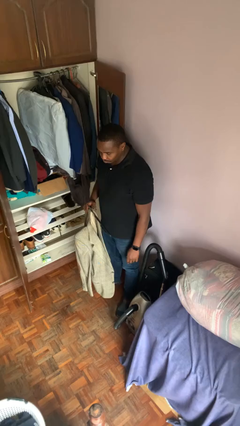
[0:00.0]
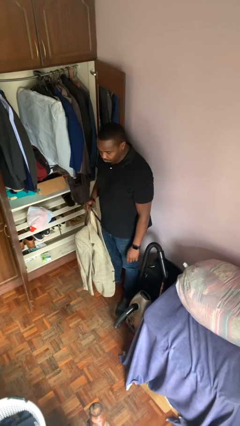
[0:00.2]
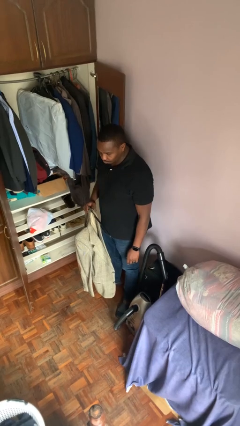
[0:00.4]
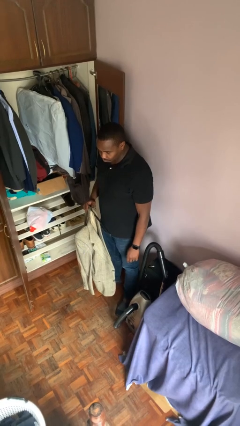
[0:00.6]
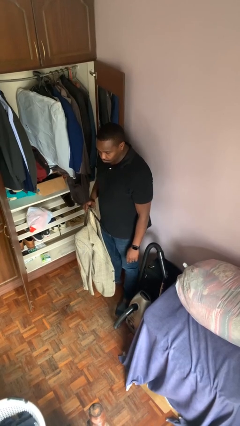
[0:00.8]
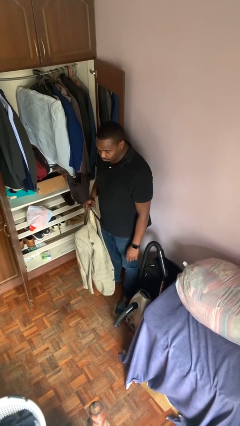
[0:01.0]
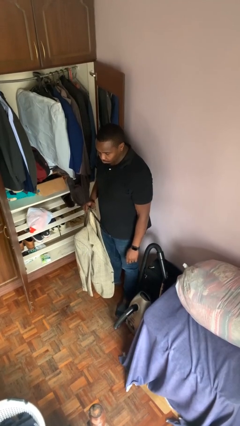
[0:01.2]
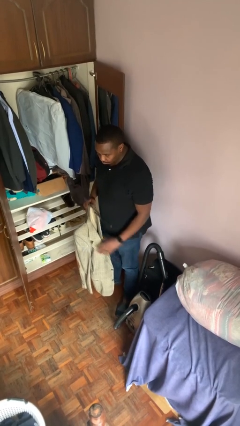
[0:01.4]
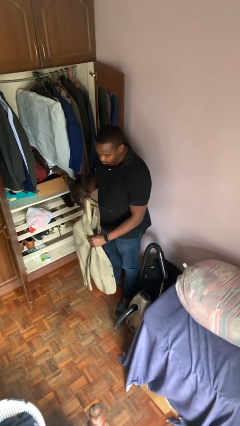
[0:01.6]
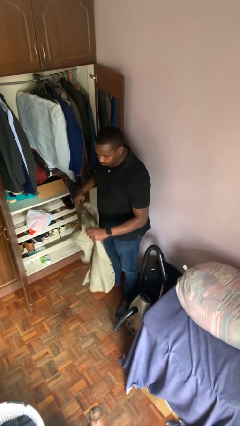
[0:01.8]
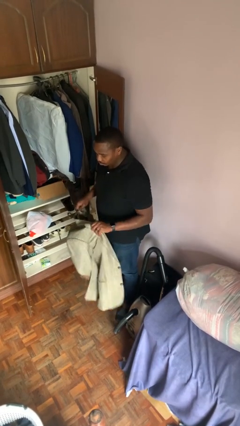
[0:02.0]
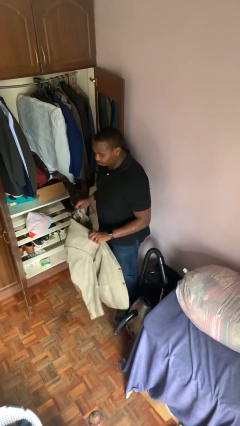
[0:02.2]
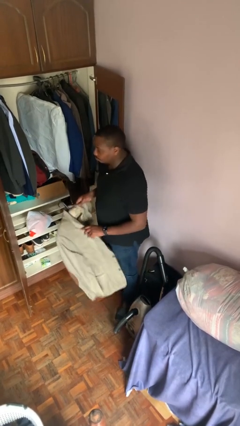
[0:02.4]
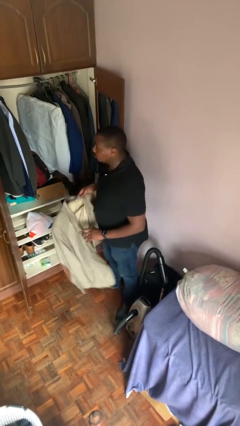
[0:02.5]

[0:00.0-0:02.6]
person takes clothes from closet

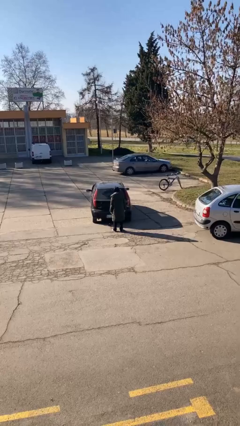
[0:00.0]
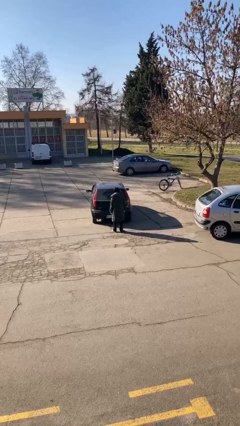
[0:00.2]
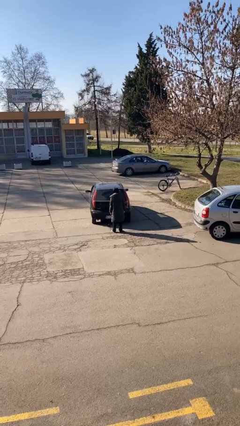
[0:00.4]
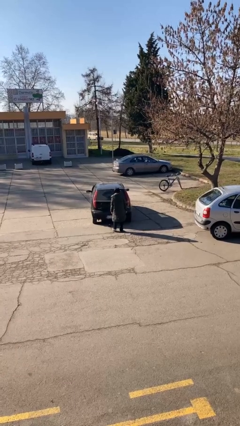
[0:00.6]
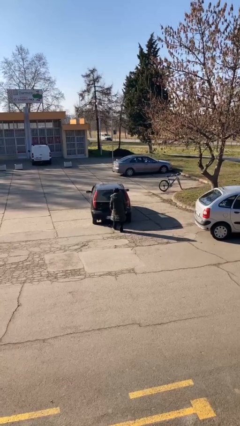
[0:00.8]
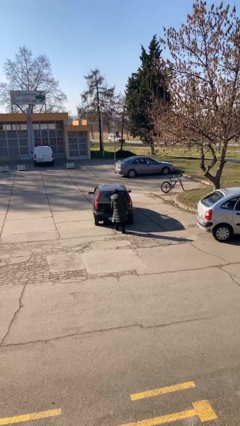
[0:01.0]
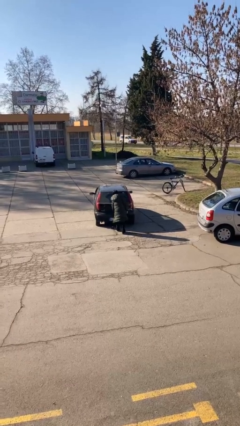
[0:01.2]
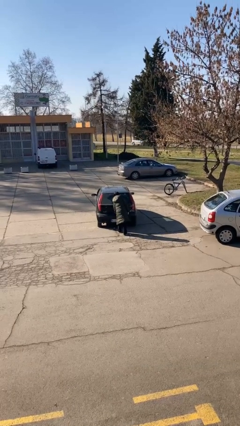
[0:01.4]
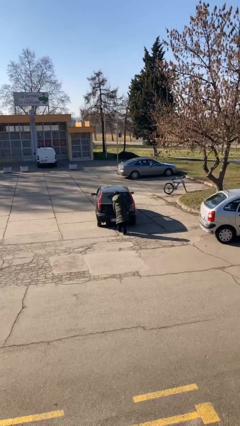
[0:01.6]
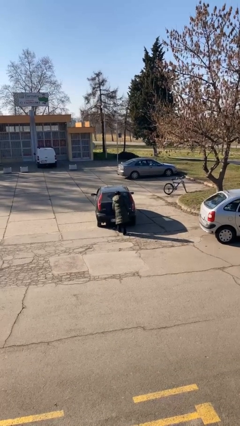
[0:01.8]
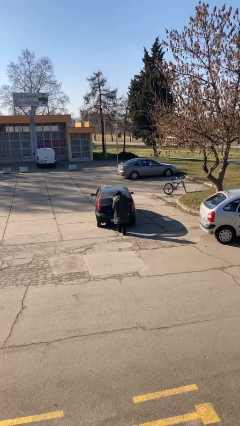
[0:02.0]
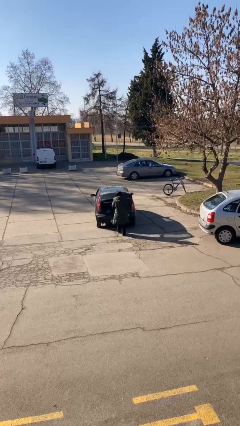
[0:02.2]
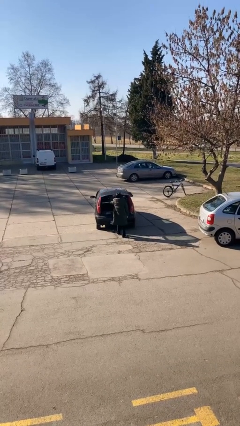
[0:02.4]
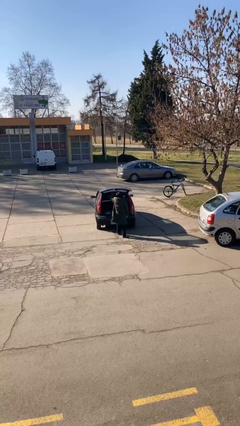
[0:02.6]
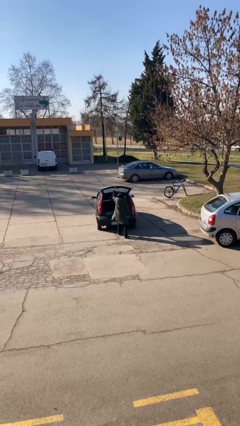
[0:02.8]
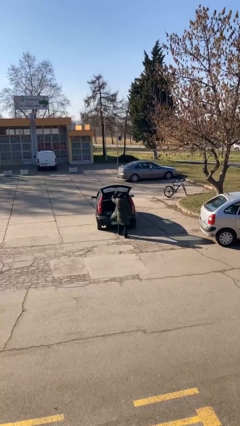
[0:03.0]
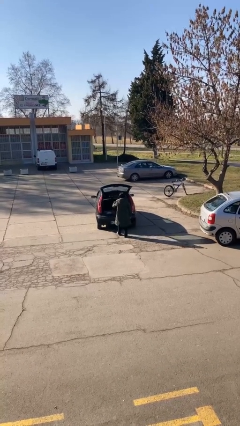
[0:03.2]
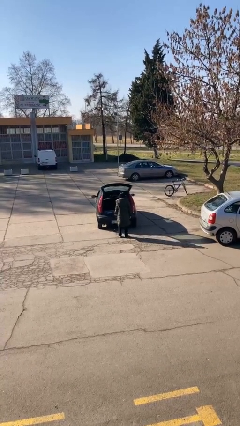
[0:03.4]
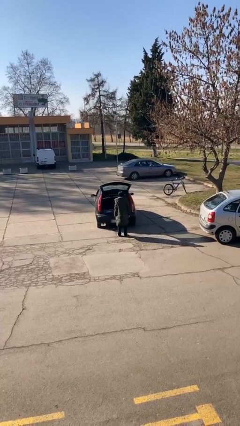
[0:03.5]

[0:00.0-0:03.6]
person opens car trunk

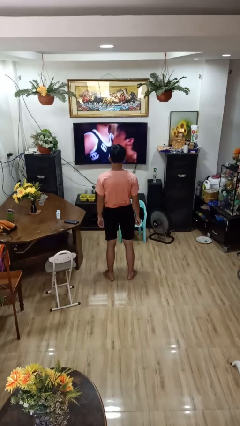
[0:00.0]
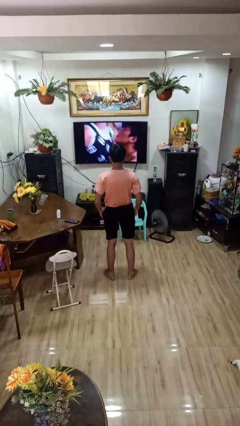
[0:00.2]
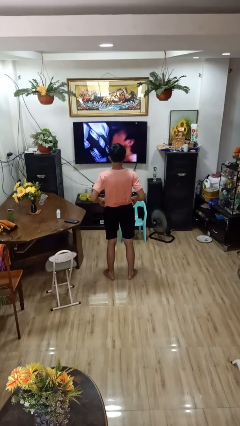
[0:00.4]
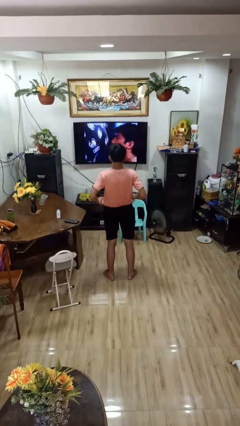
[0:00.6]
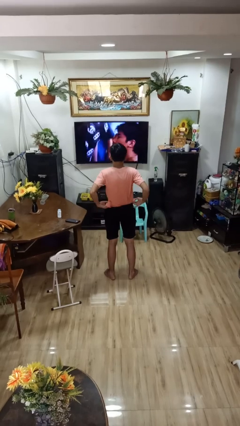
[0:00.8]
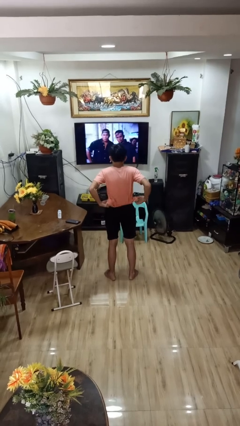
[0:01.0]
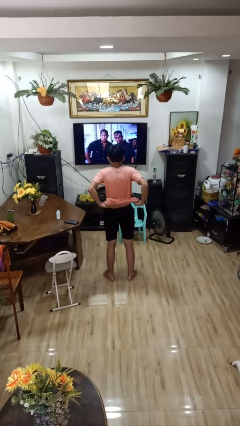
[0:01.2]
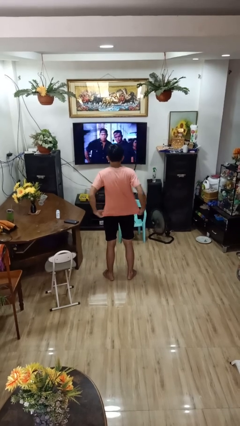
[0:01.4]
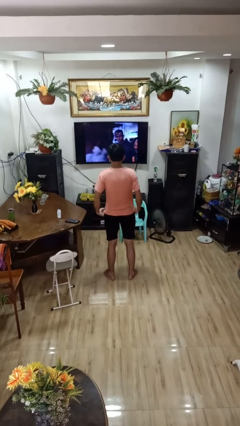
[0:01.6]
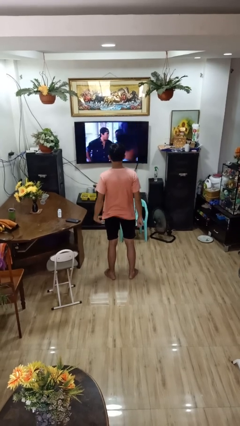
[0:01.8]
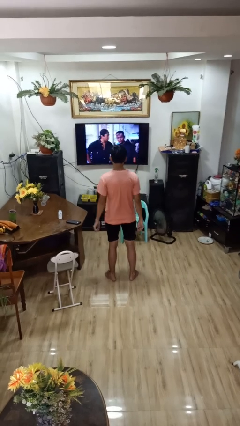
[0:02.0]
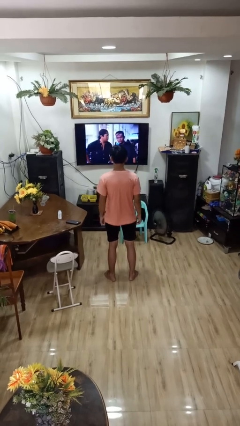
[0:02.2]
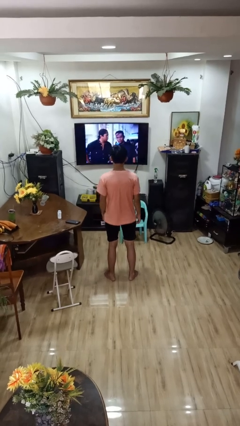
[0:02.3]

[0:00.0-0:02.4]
person untucks shirt

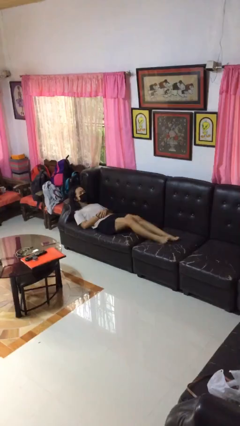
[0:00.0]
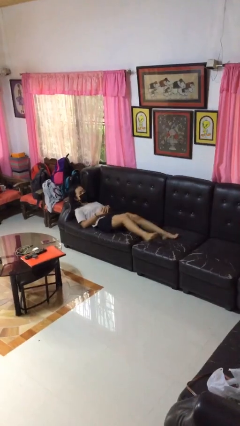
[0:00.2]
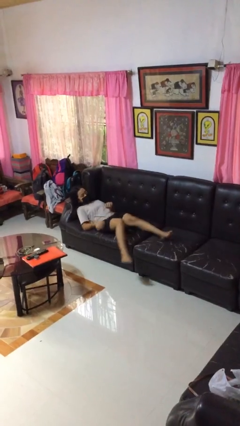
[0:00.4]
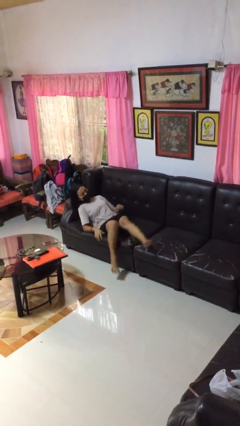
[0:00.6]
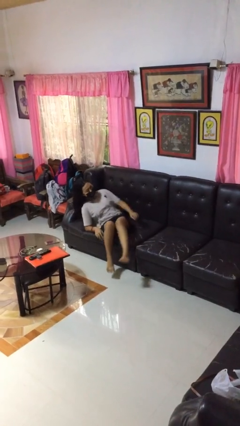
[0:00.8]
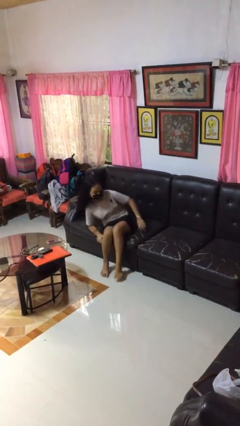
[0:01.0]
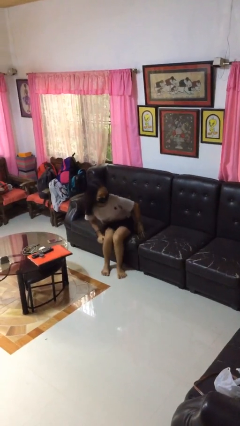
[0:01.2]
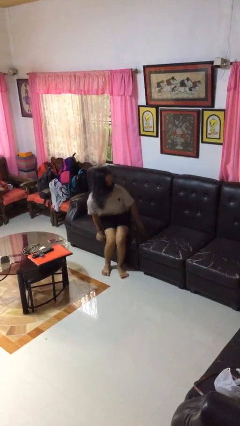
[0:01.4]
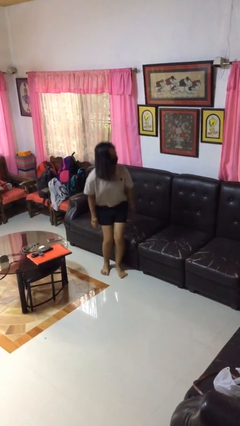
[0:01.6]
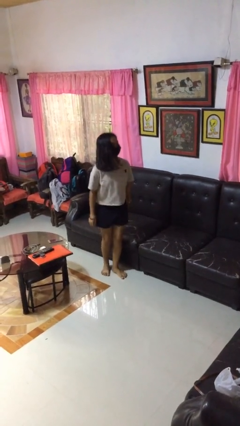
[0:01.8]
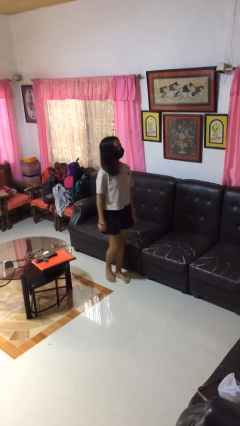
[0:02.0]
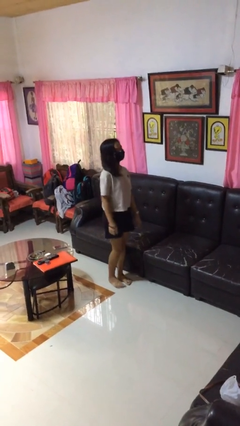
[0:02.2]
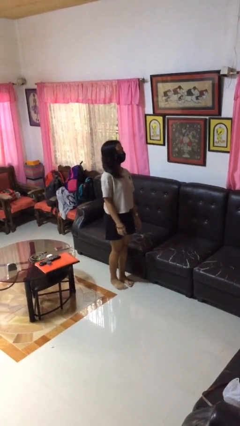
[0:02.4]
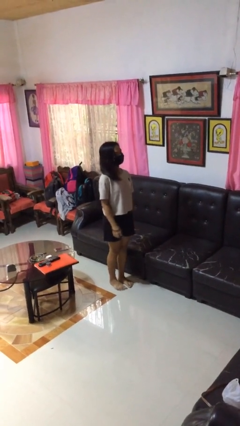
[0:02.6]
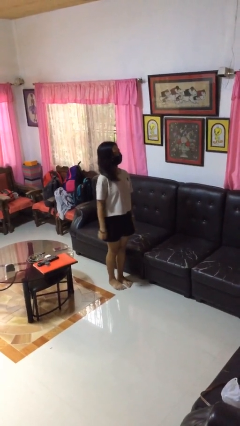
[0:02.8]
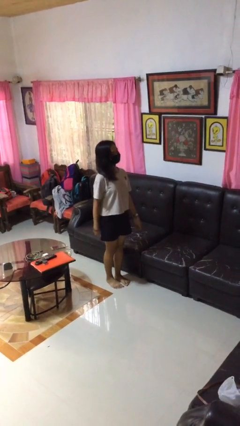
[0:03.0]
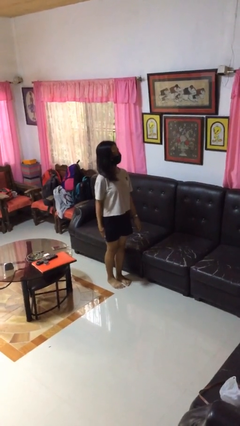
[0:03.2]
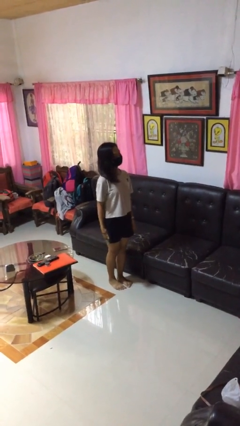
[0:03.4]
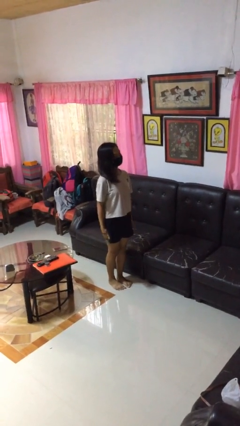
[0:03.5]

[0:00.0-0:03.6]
person stands up

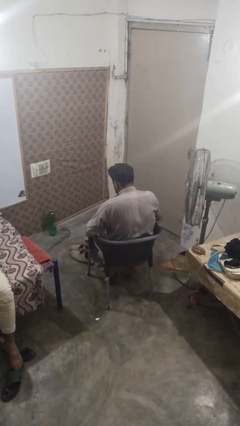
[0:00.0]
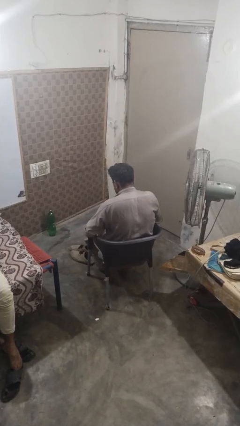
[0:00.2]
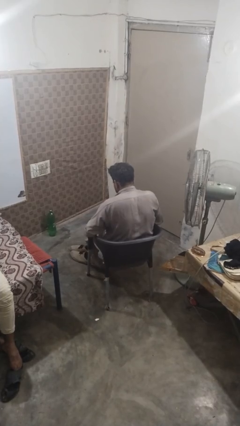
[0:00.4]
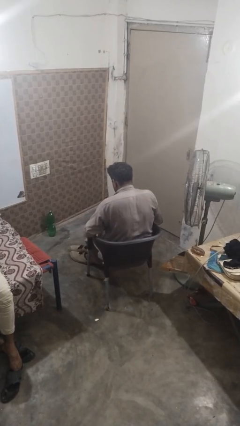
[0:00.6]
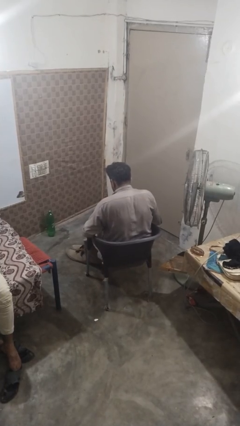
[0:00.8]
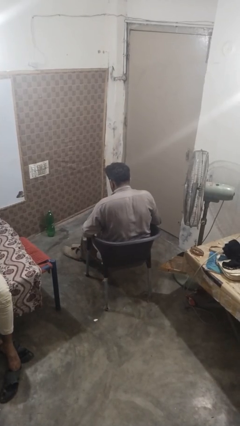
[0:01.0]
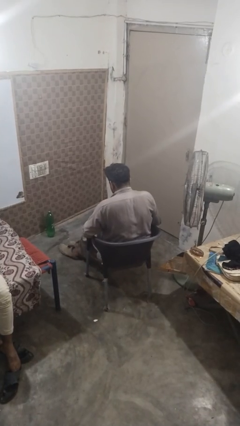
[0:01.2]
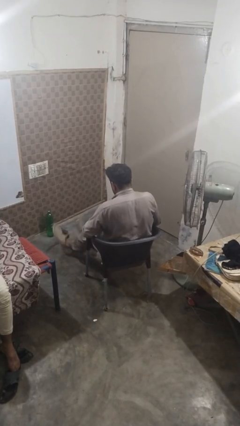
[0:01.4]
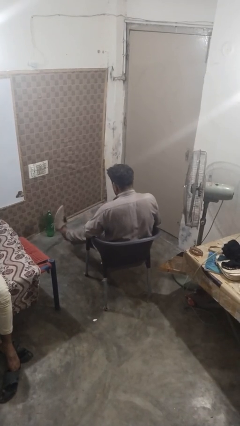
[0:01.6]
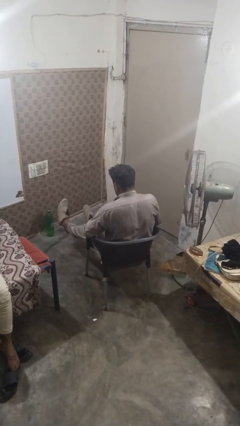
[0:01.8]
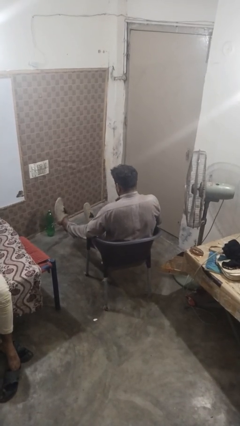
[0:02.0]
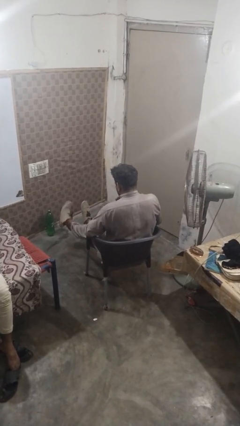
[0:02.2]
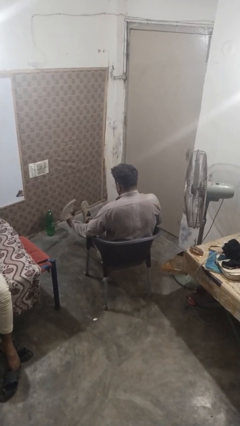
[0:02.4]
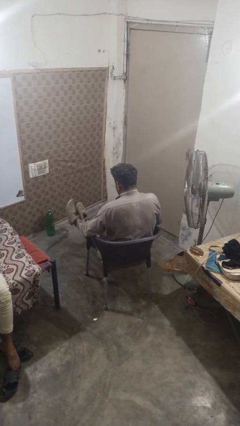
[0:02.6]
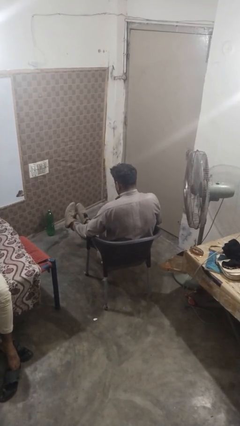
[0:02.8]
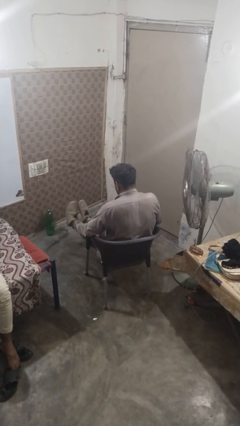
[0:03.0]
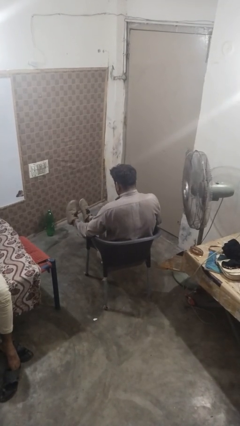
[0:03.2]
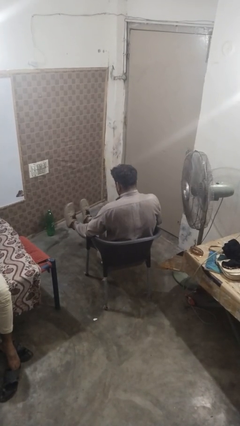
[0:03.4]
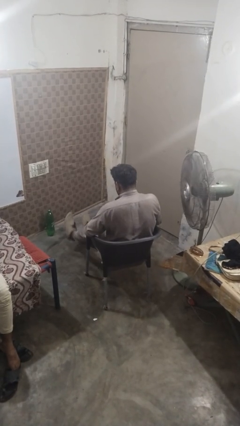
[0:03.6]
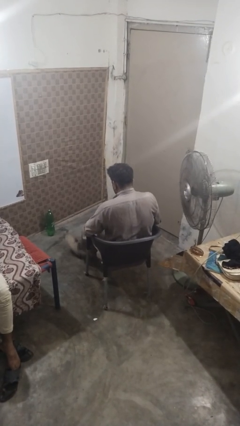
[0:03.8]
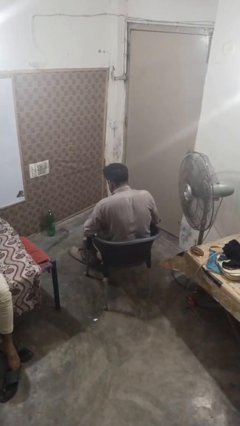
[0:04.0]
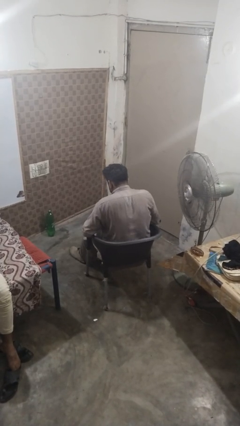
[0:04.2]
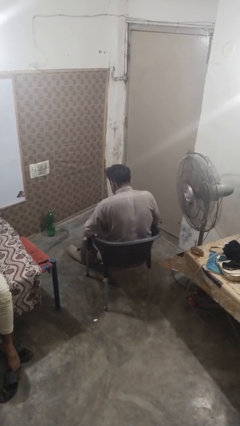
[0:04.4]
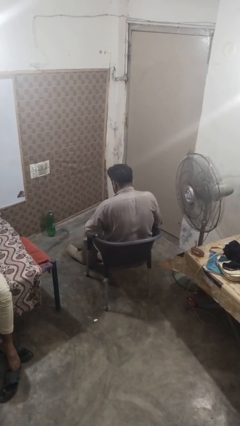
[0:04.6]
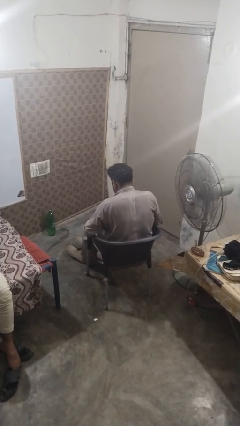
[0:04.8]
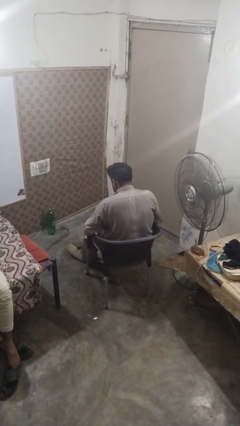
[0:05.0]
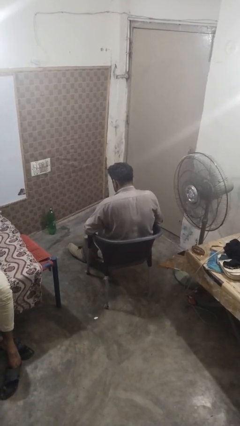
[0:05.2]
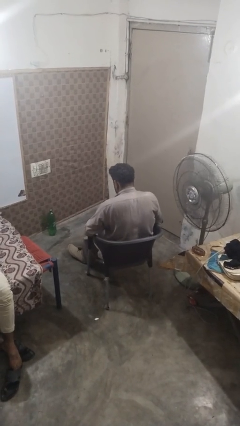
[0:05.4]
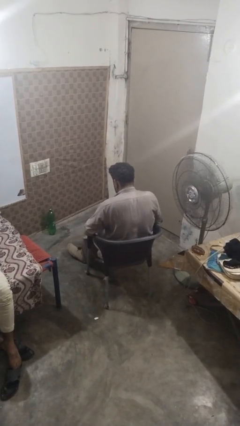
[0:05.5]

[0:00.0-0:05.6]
person puts on shoes
